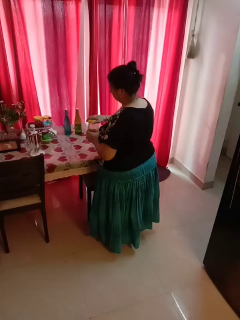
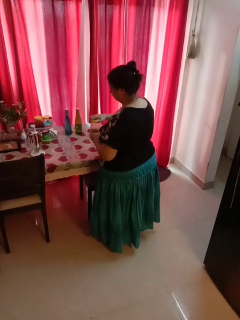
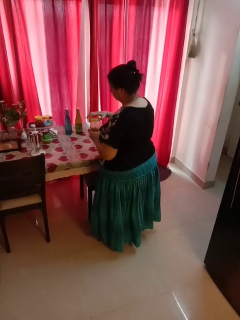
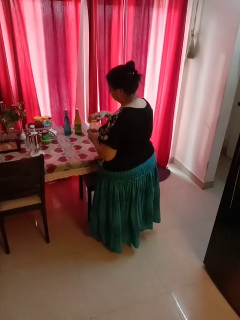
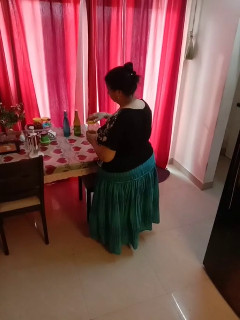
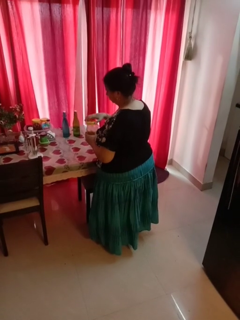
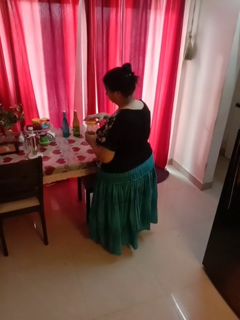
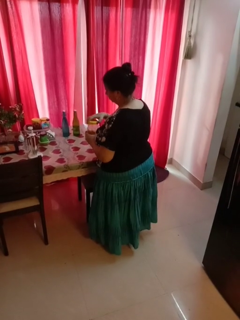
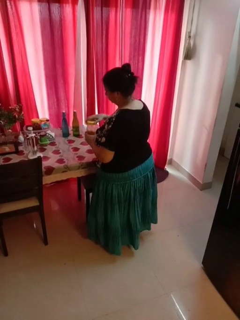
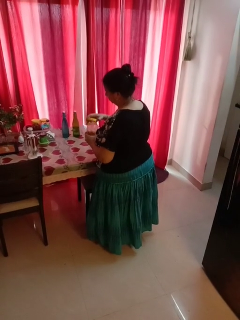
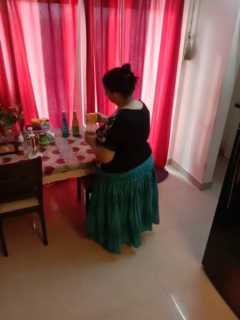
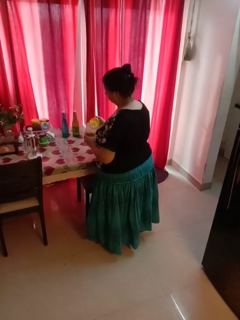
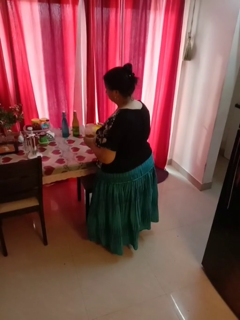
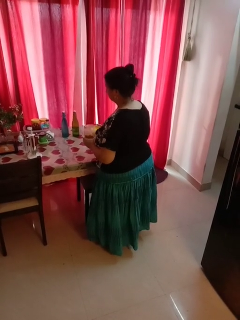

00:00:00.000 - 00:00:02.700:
person opens jar

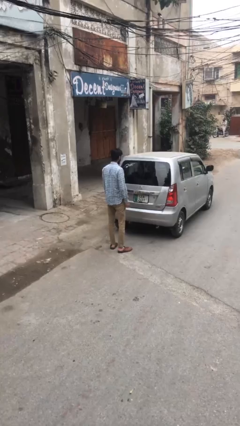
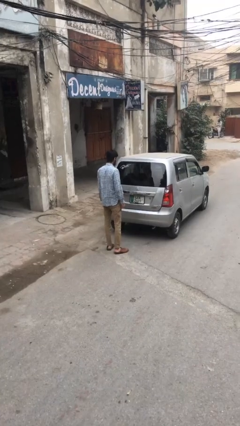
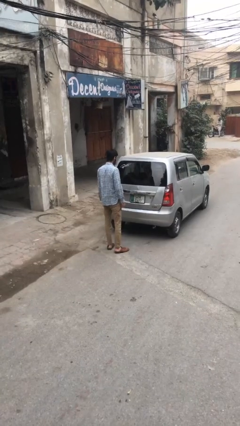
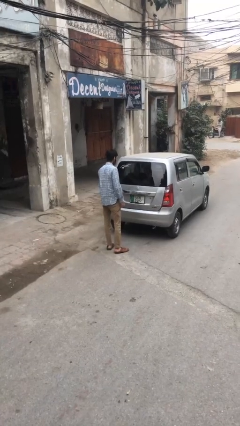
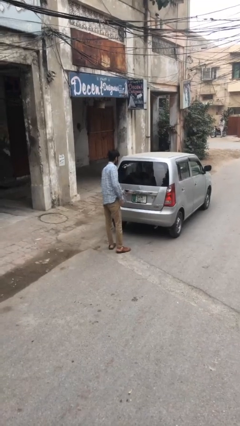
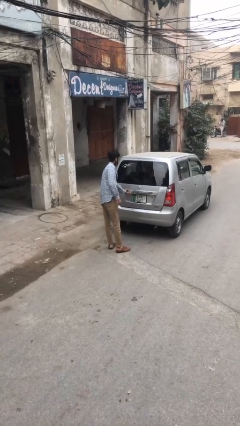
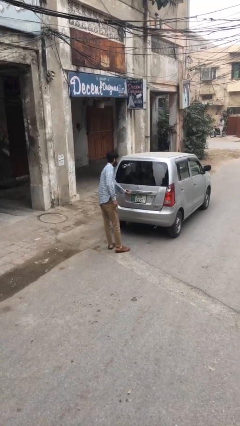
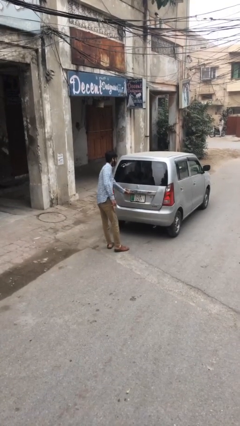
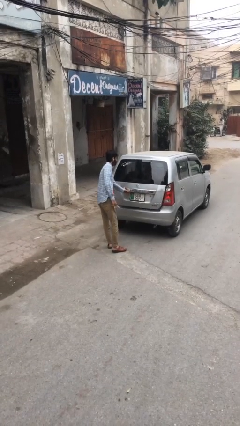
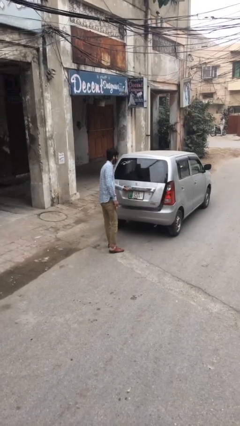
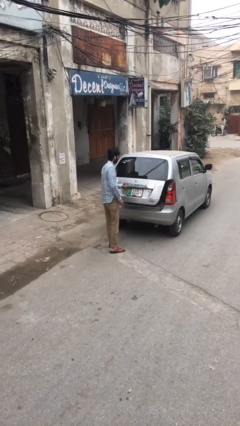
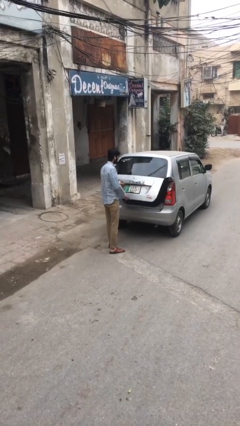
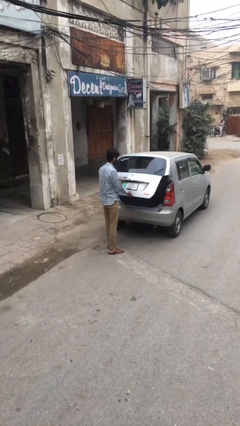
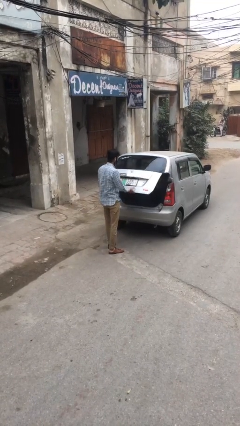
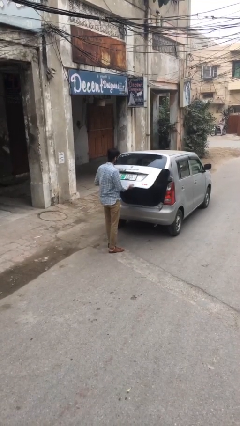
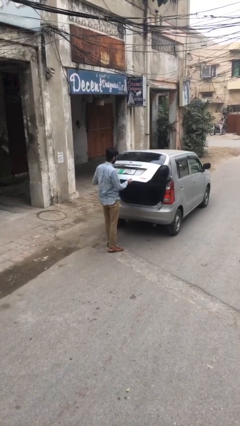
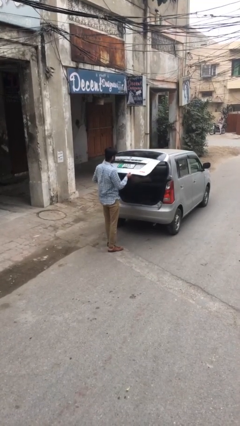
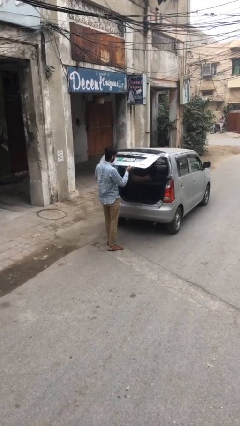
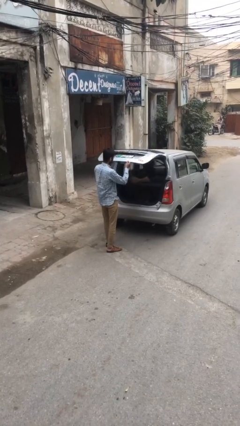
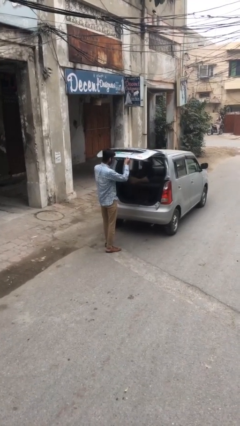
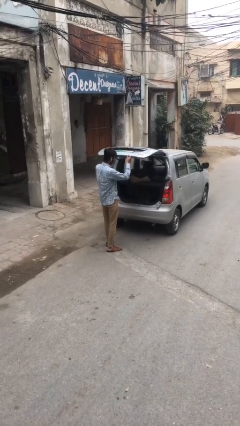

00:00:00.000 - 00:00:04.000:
person opens car trunk

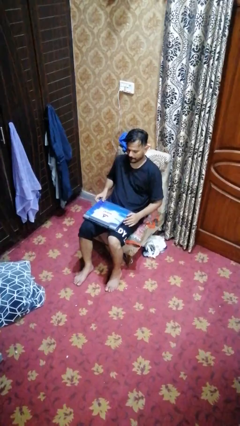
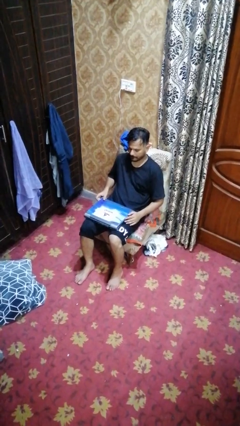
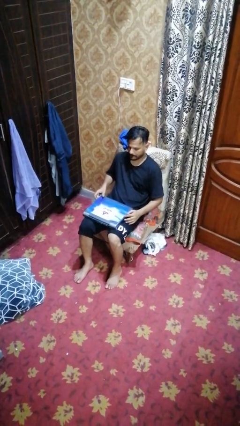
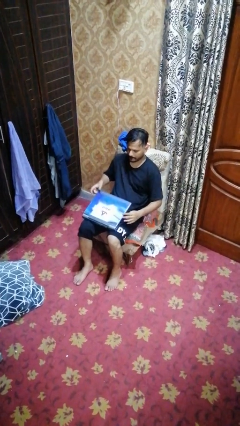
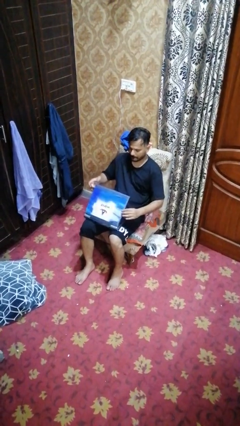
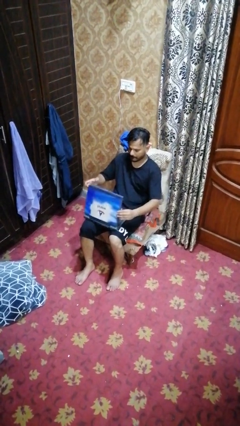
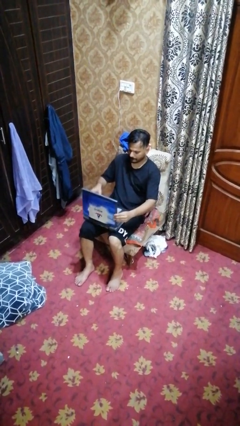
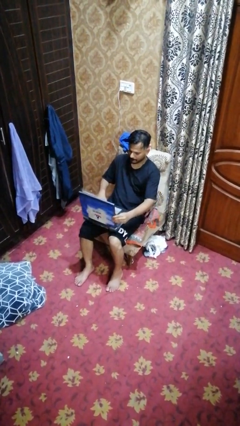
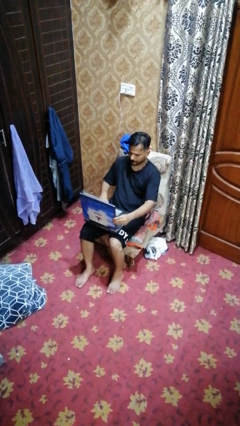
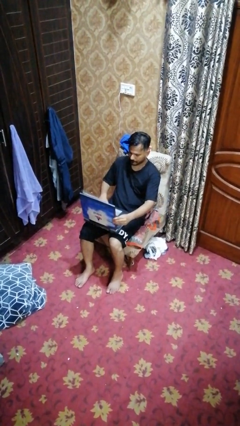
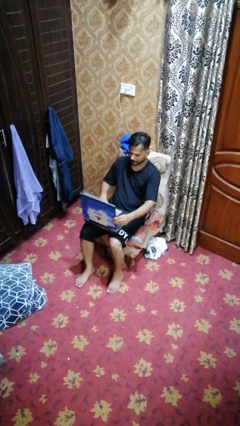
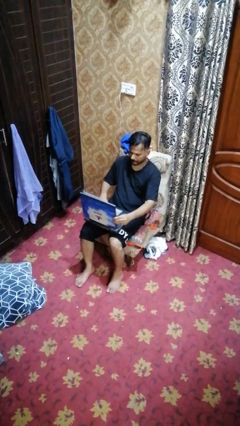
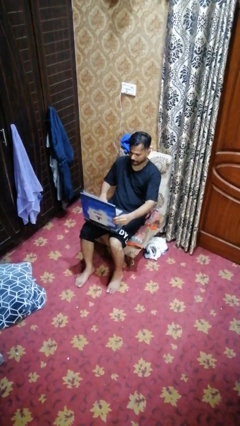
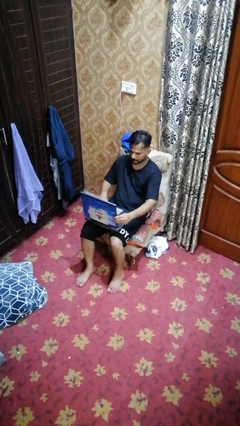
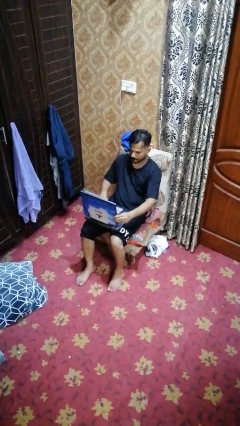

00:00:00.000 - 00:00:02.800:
person opens laptop

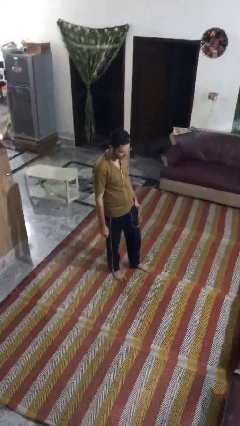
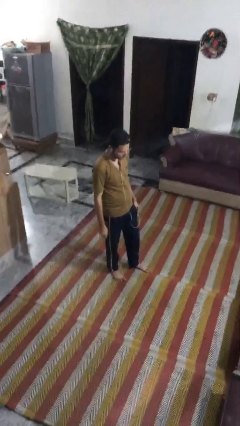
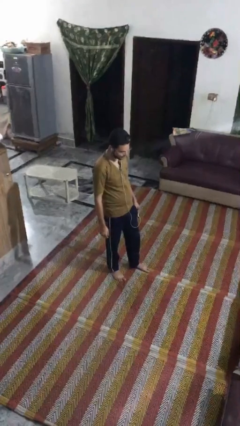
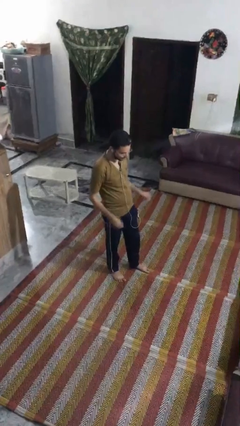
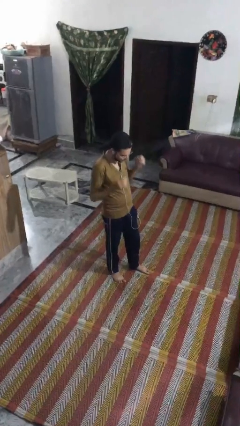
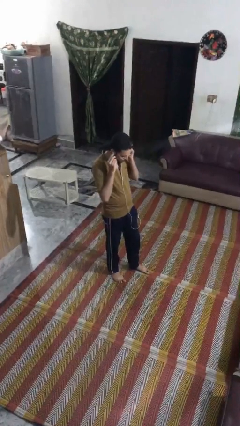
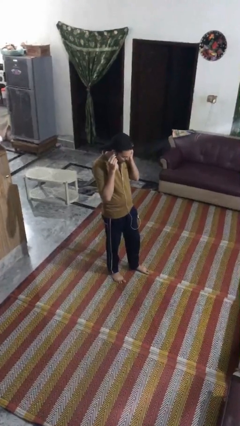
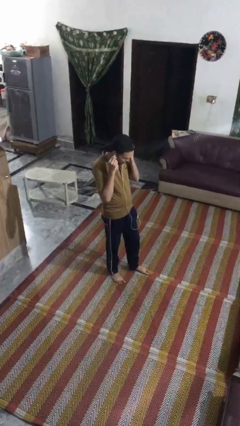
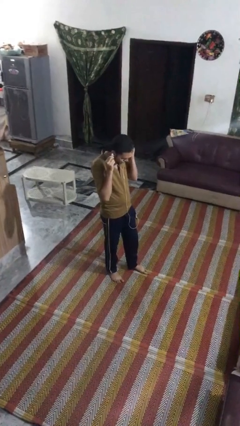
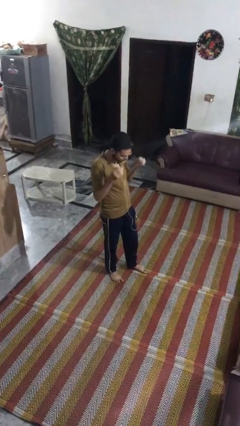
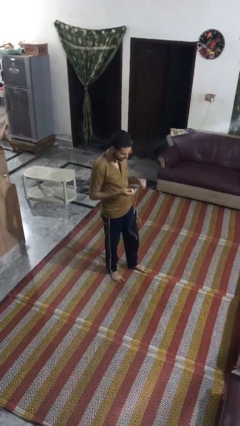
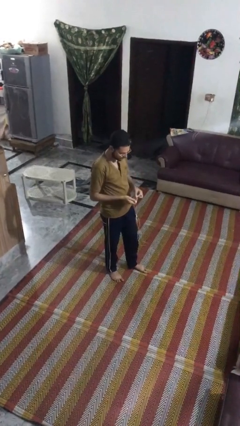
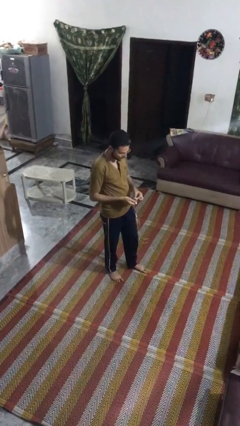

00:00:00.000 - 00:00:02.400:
person takes off headphones

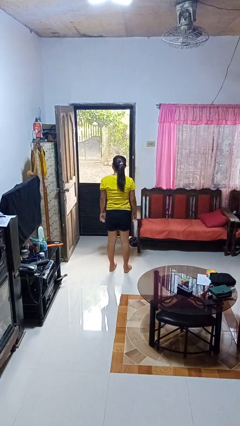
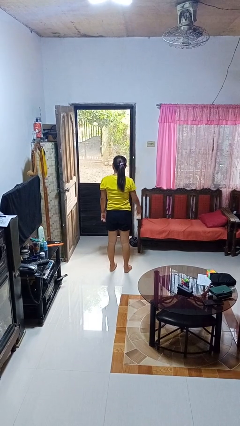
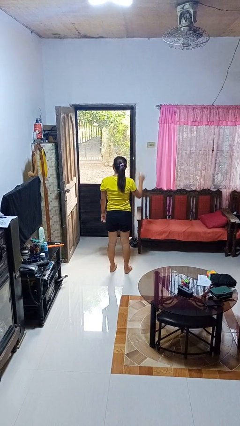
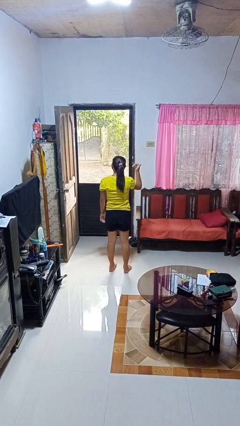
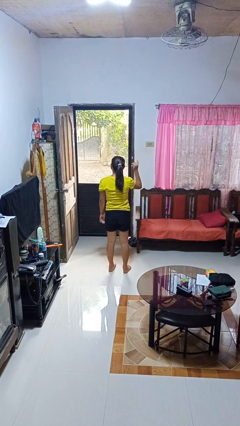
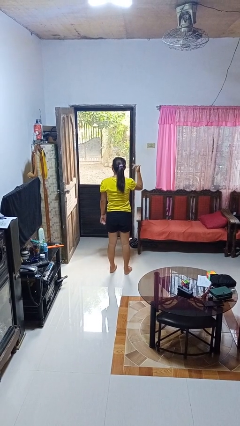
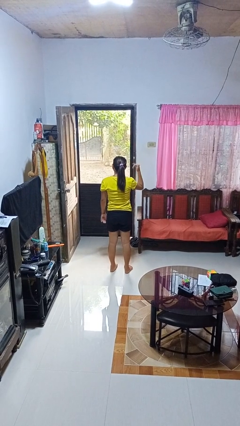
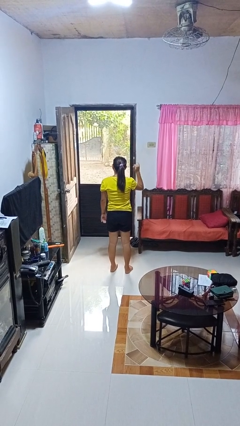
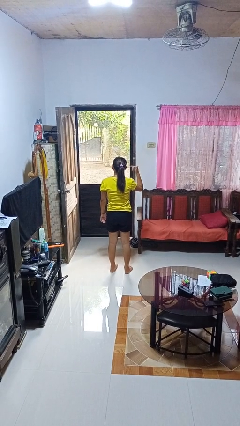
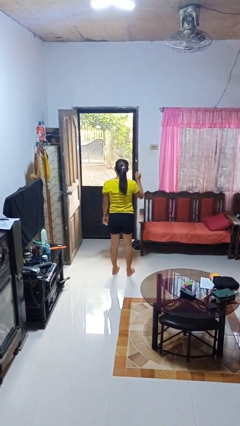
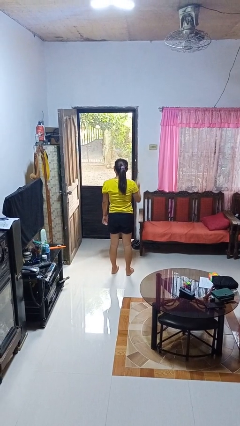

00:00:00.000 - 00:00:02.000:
person gestures hang loose

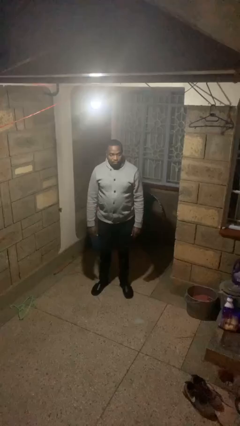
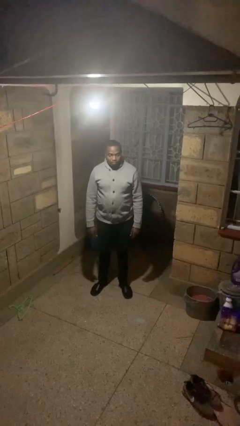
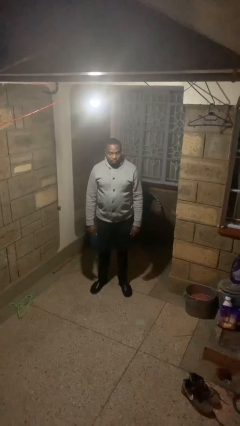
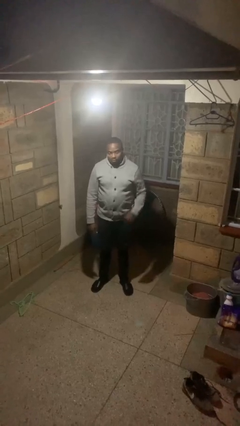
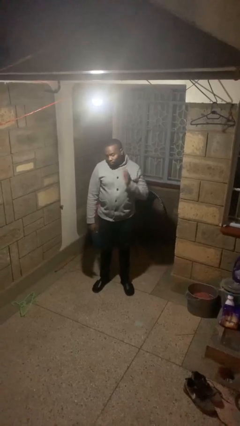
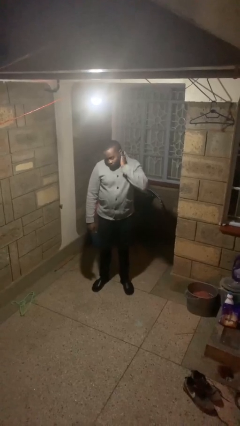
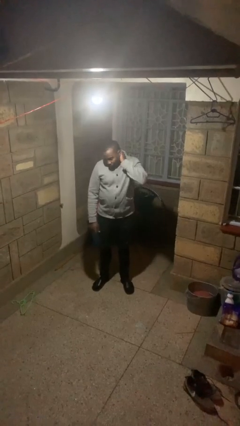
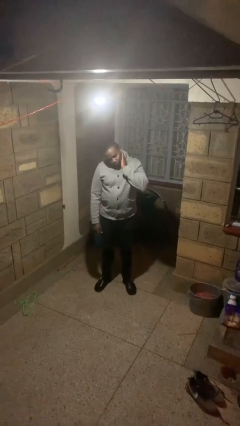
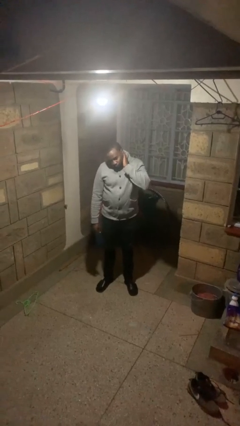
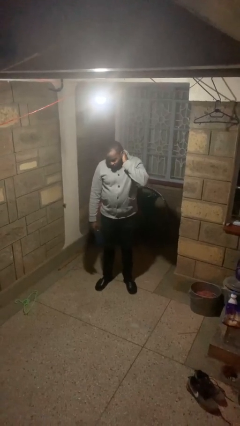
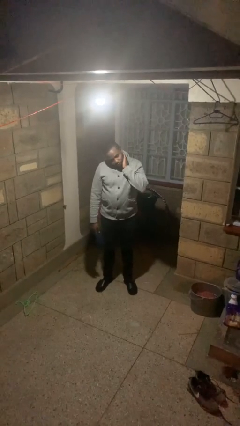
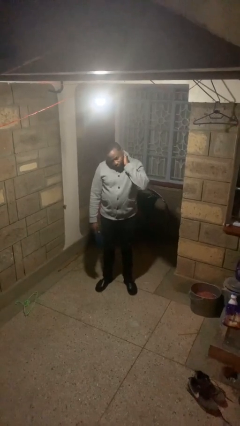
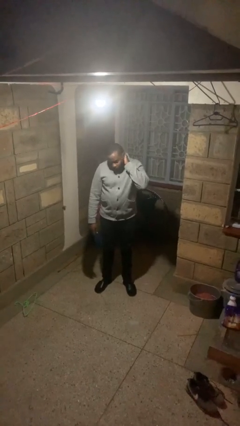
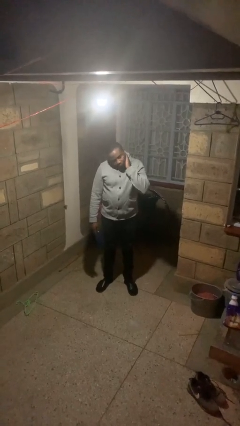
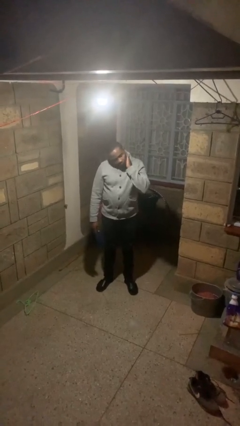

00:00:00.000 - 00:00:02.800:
person rubs neck

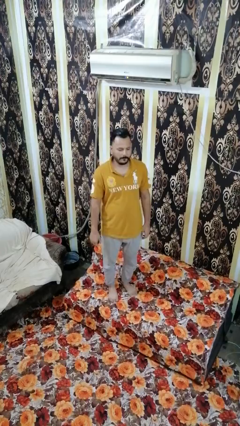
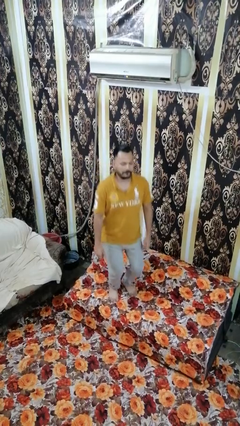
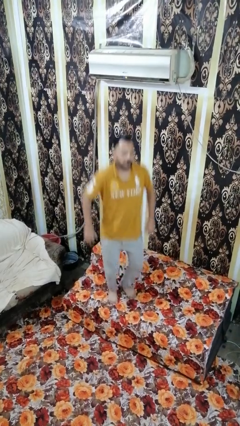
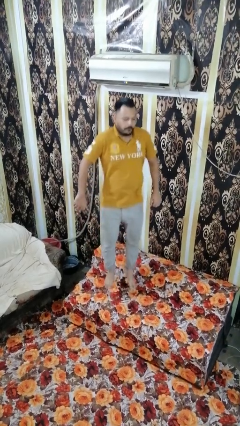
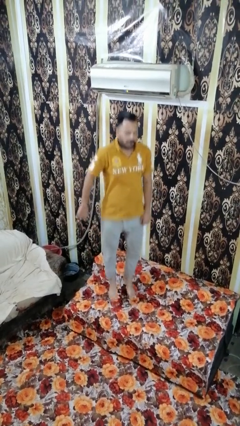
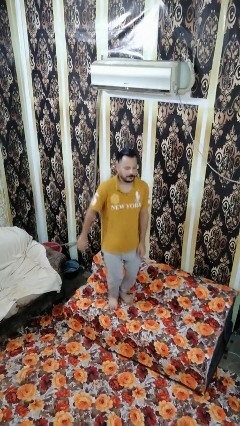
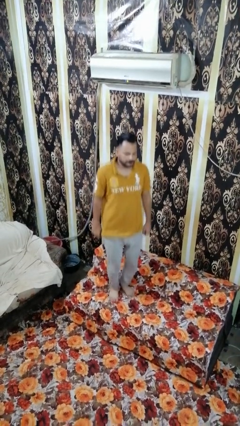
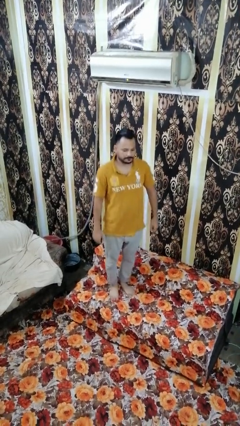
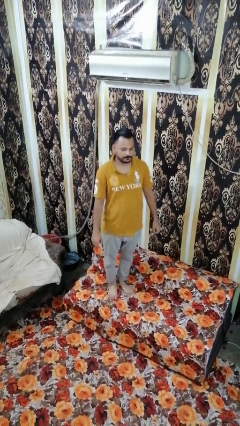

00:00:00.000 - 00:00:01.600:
person jumps on couch
